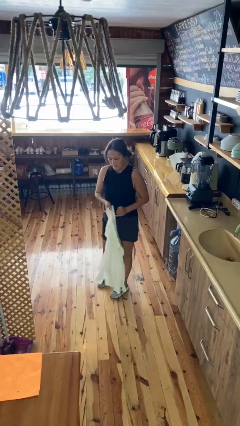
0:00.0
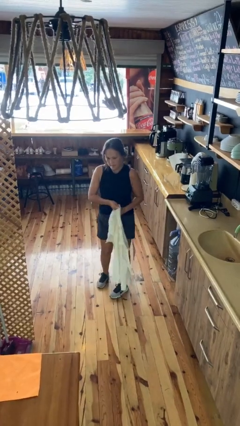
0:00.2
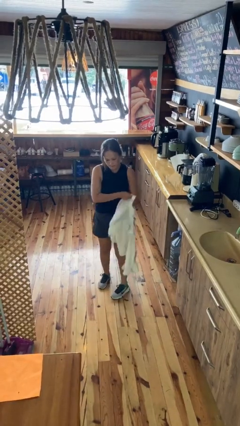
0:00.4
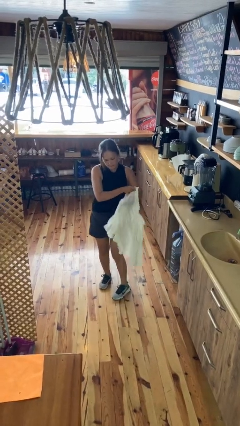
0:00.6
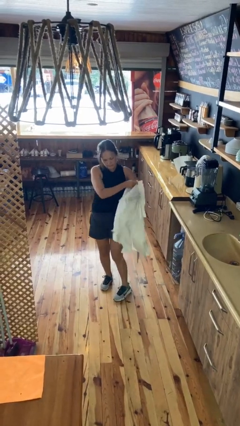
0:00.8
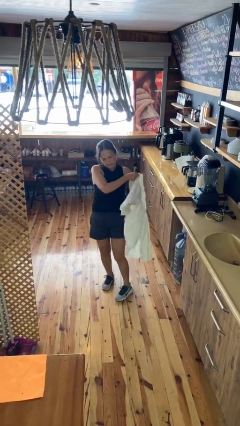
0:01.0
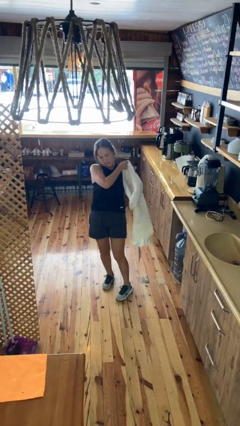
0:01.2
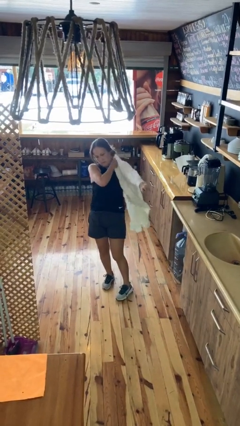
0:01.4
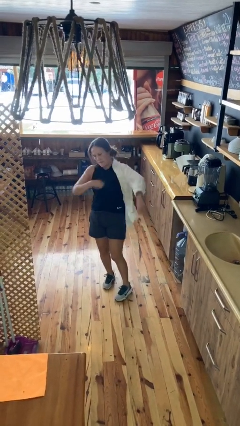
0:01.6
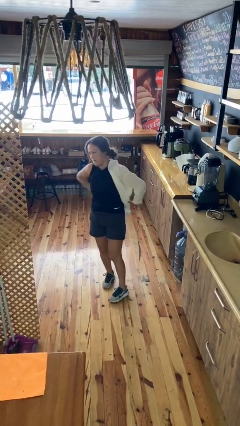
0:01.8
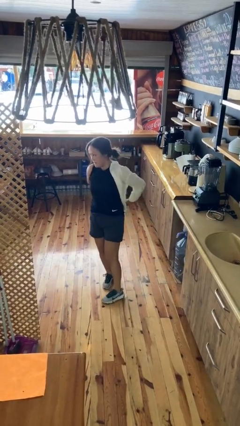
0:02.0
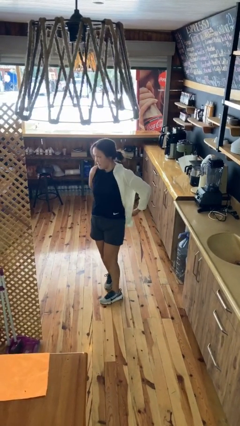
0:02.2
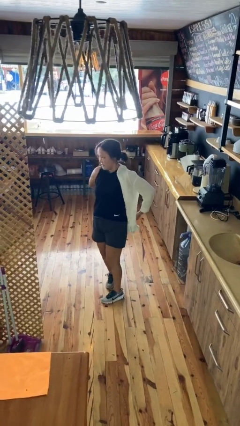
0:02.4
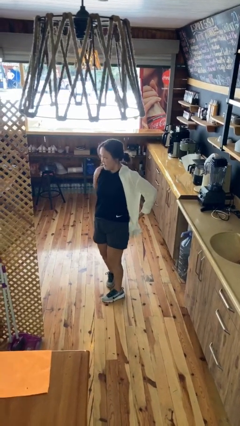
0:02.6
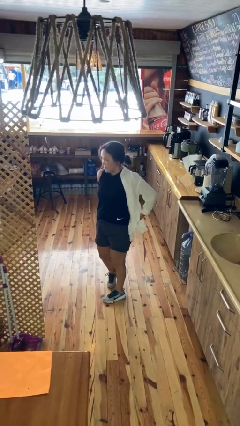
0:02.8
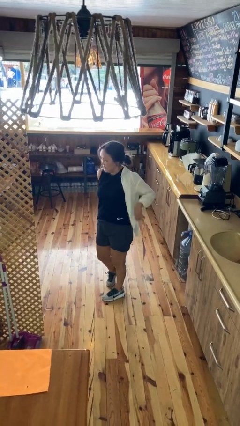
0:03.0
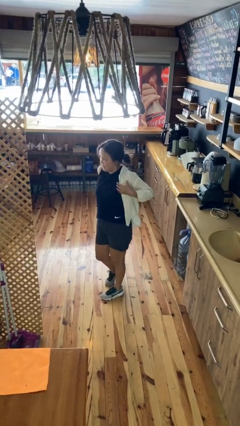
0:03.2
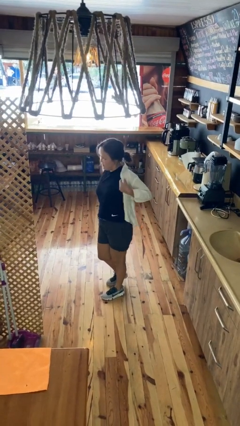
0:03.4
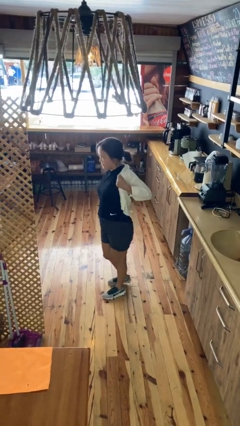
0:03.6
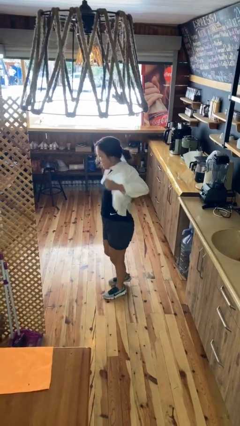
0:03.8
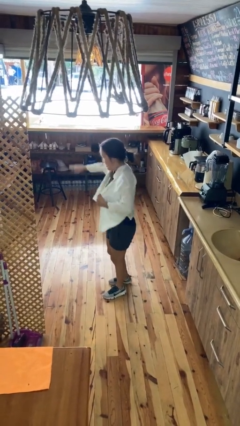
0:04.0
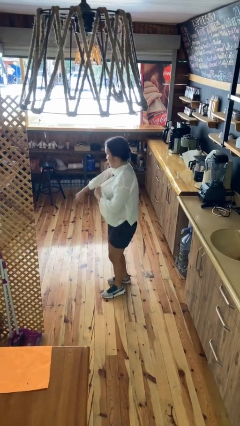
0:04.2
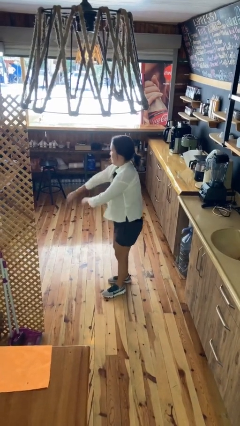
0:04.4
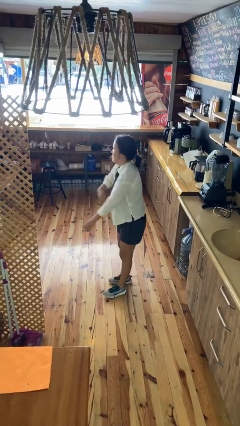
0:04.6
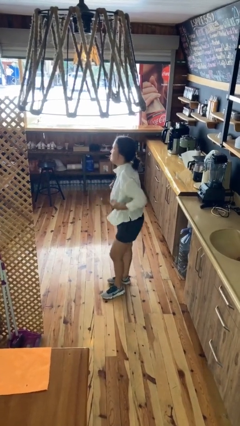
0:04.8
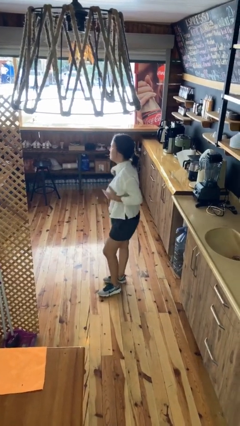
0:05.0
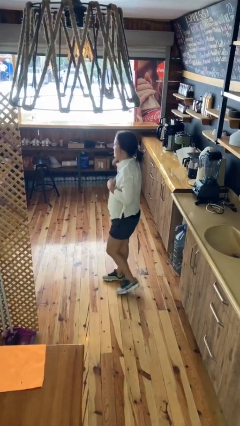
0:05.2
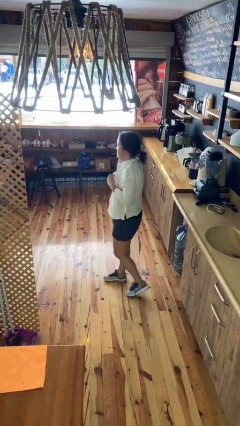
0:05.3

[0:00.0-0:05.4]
person puts on shirt

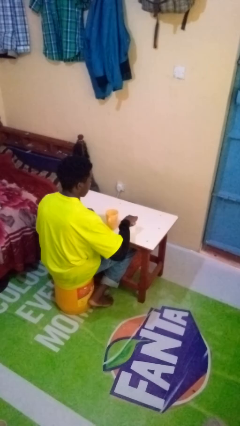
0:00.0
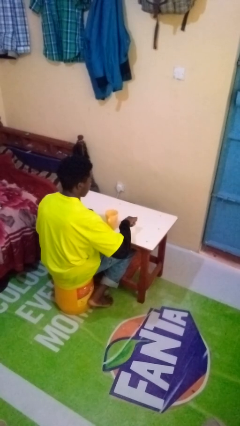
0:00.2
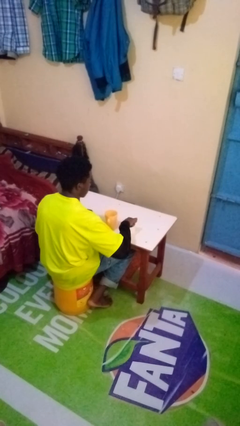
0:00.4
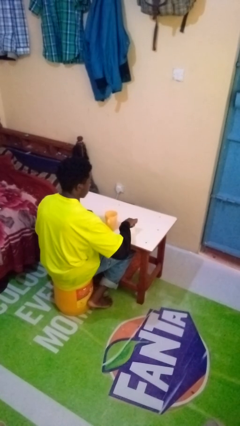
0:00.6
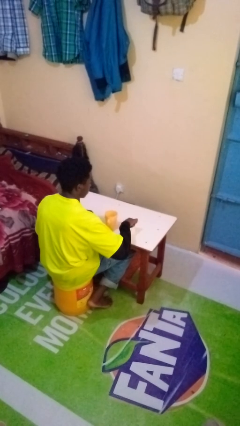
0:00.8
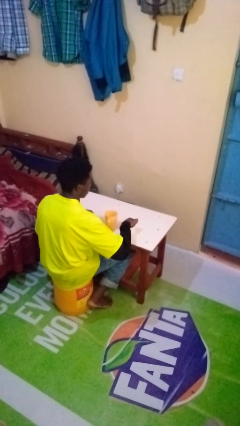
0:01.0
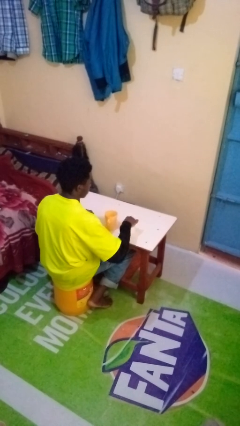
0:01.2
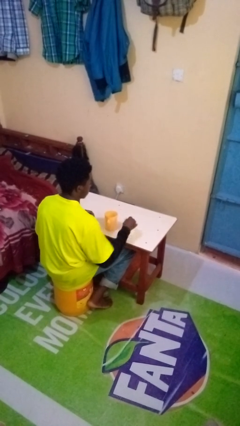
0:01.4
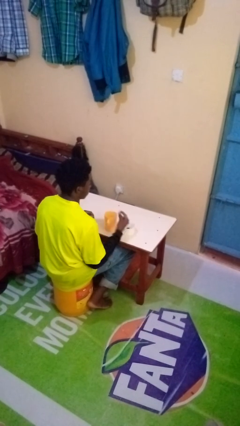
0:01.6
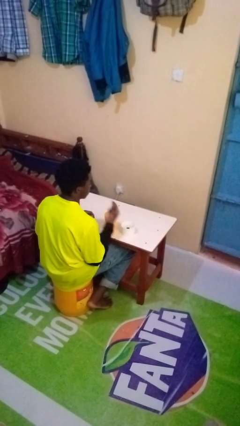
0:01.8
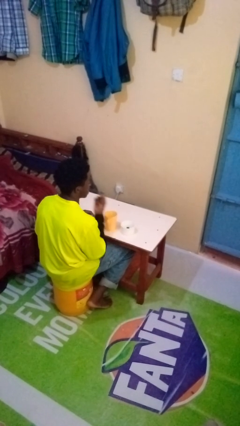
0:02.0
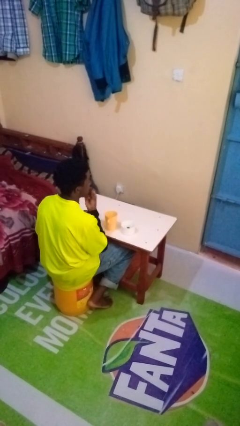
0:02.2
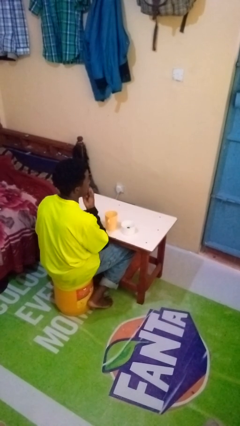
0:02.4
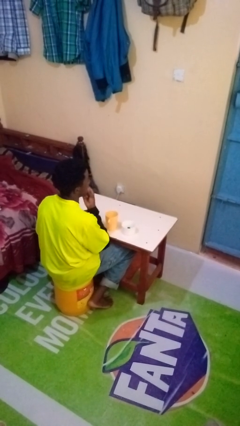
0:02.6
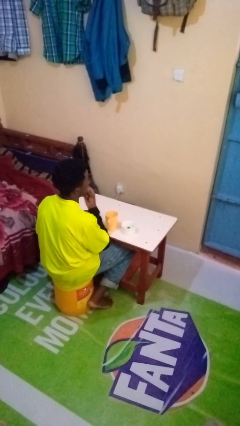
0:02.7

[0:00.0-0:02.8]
person takes medicine pills

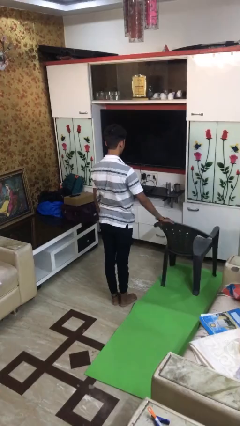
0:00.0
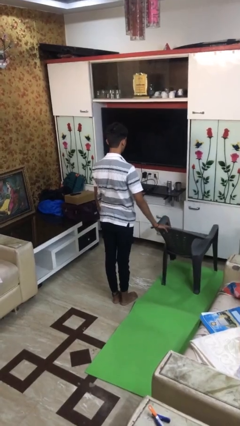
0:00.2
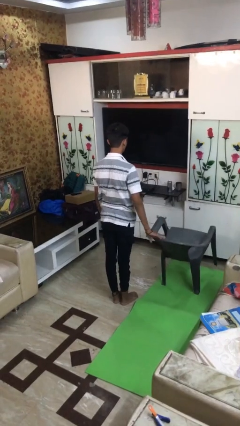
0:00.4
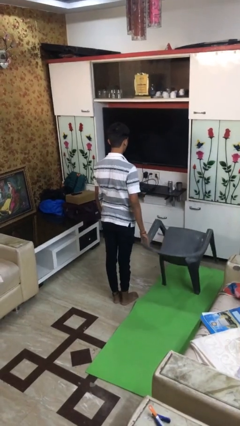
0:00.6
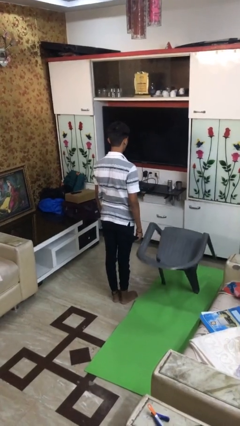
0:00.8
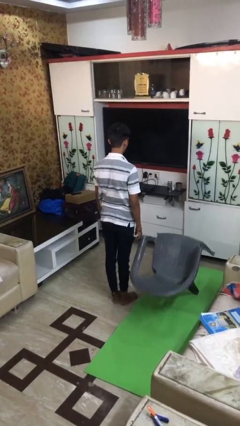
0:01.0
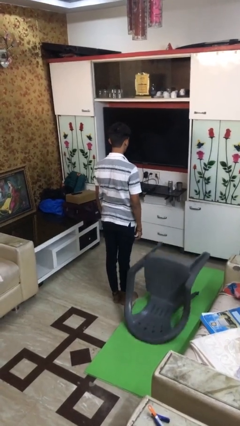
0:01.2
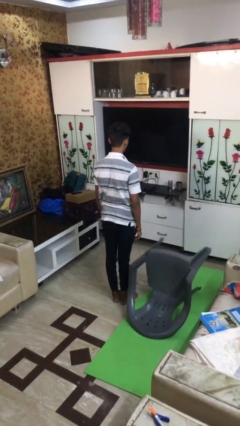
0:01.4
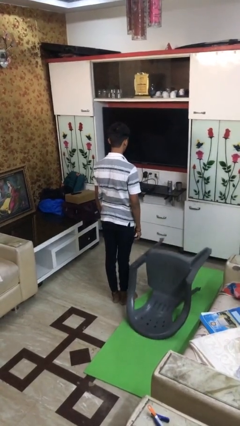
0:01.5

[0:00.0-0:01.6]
person knocks over furniture

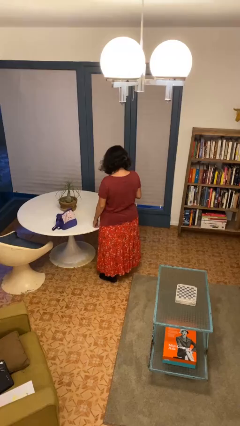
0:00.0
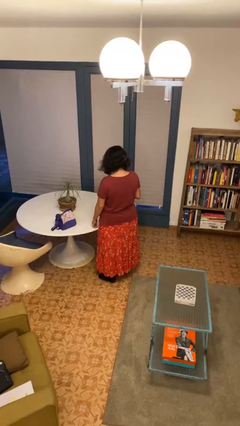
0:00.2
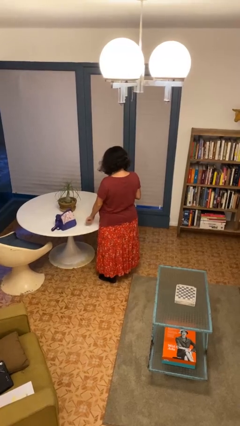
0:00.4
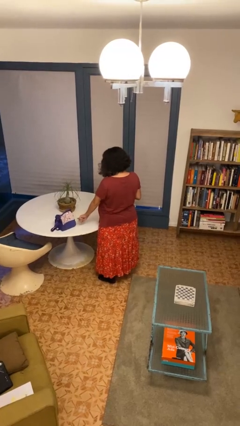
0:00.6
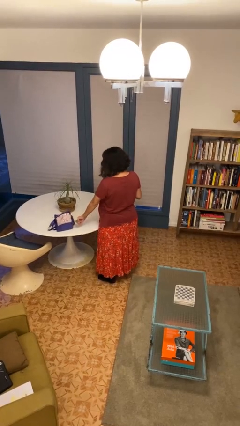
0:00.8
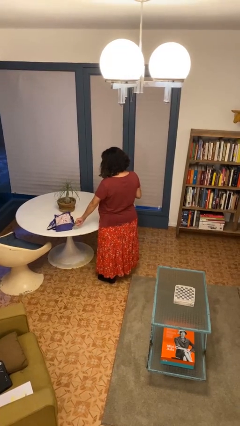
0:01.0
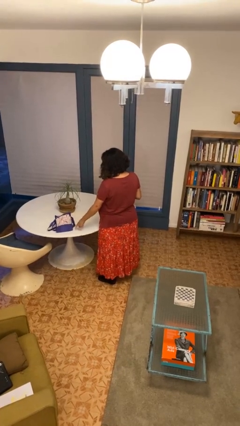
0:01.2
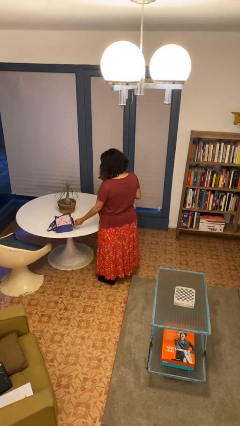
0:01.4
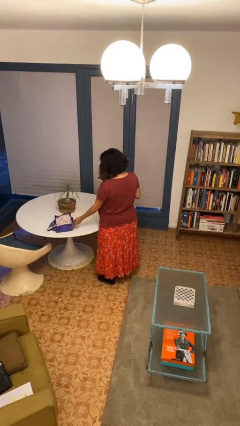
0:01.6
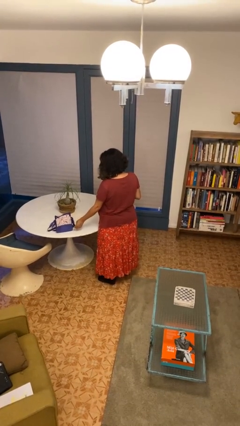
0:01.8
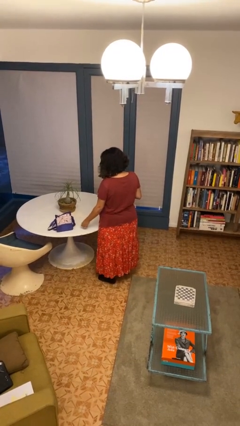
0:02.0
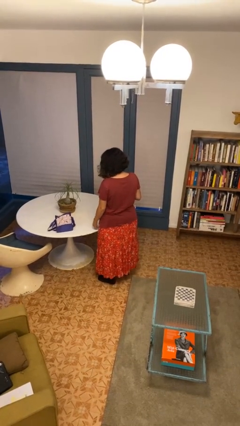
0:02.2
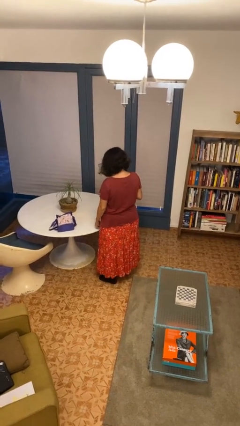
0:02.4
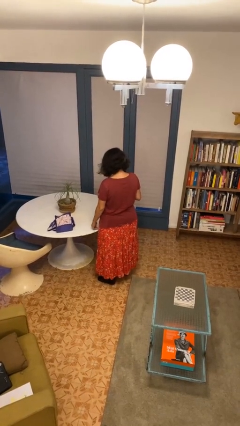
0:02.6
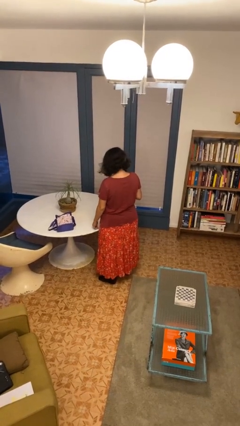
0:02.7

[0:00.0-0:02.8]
person taps object with finger

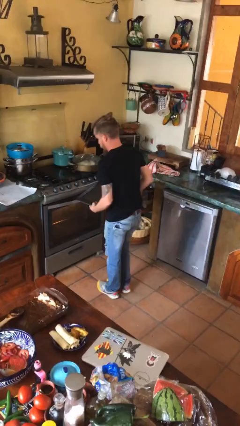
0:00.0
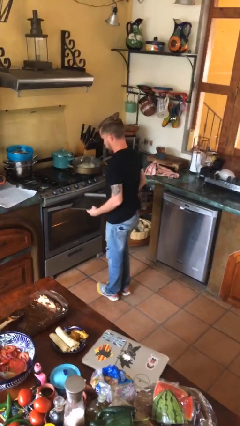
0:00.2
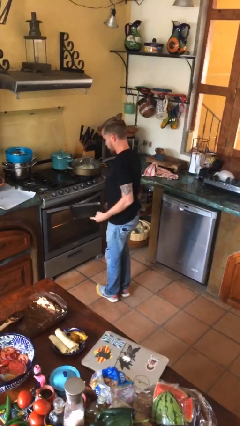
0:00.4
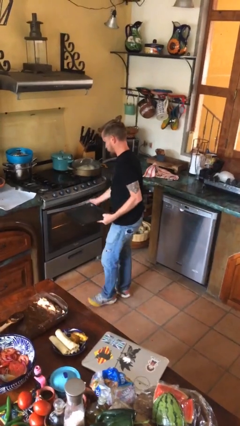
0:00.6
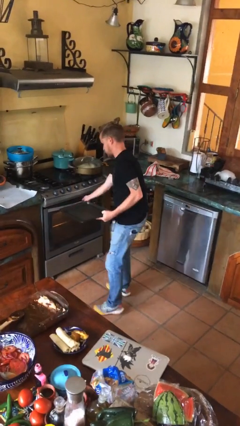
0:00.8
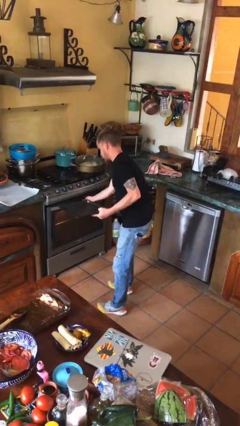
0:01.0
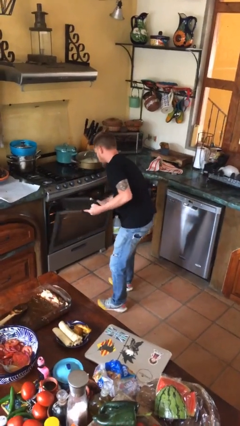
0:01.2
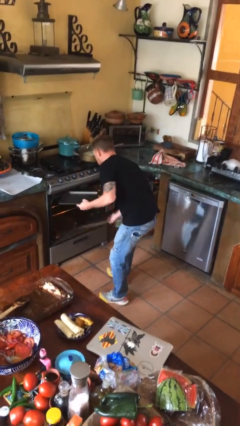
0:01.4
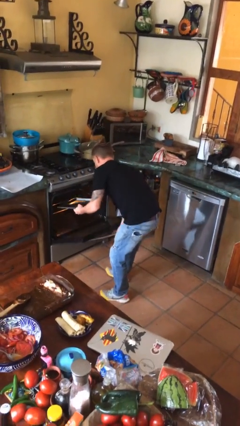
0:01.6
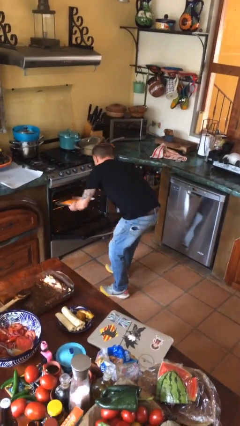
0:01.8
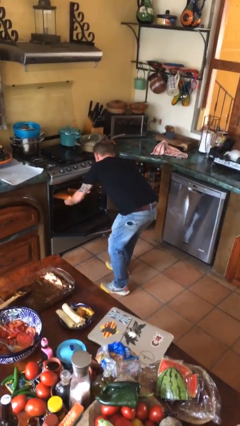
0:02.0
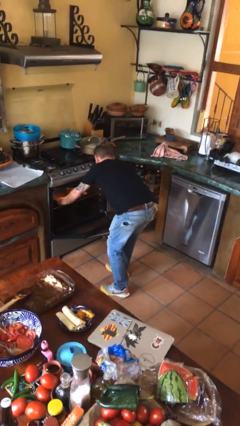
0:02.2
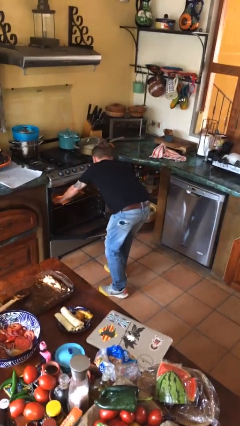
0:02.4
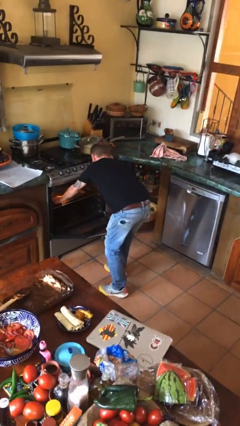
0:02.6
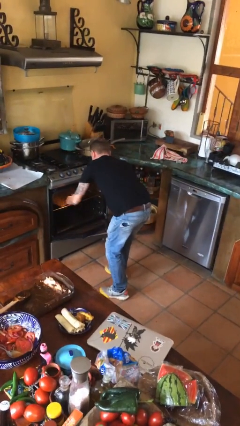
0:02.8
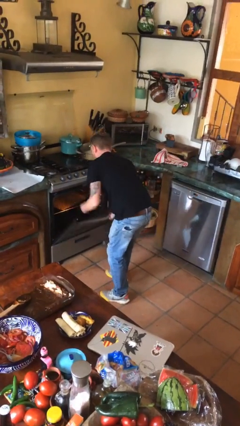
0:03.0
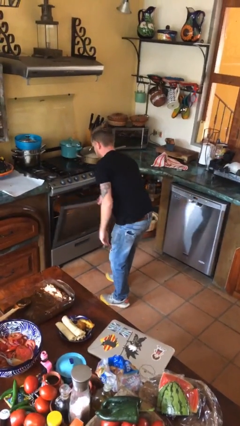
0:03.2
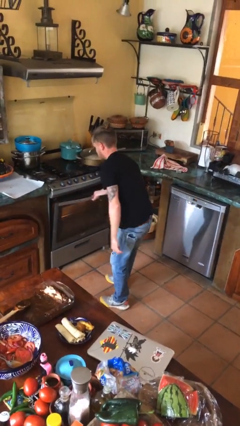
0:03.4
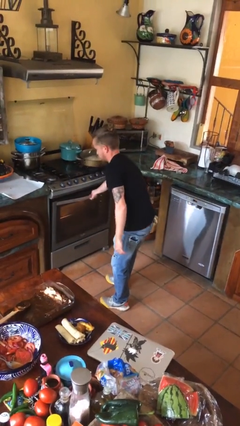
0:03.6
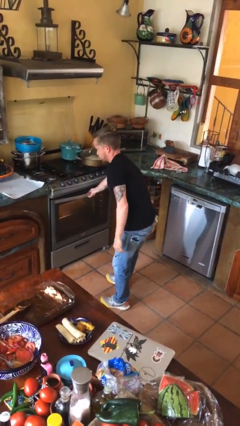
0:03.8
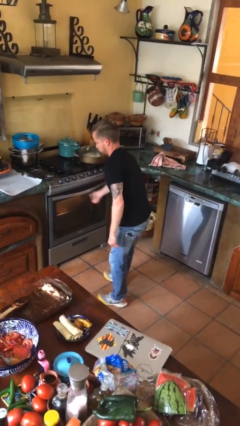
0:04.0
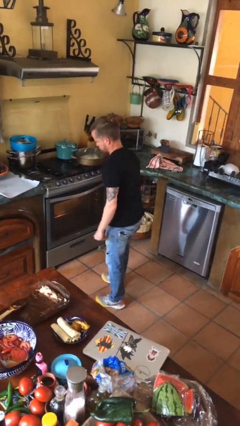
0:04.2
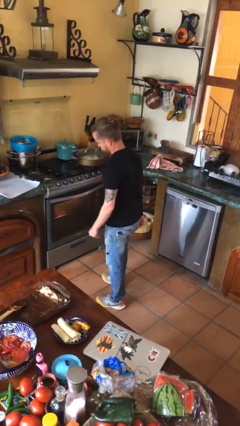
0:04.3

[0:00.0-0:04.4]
person puts object into oven

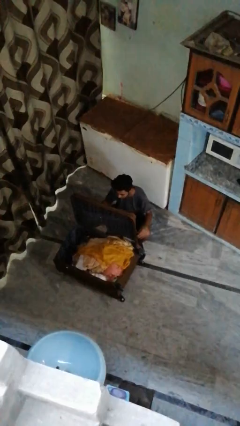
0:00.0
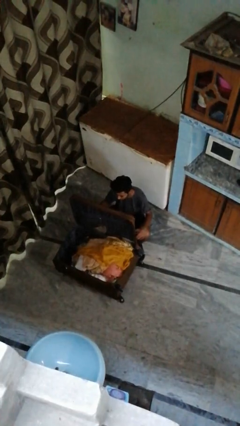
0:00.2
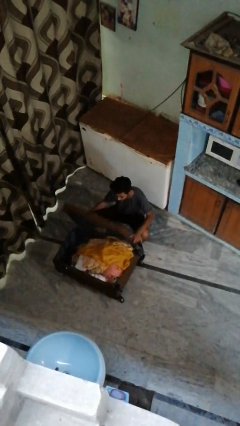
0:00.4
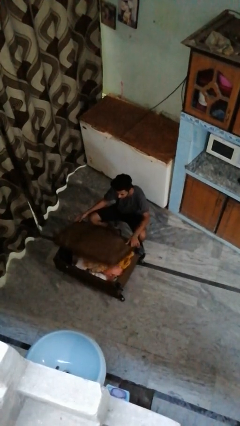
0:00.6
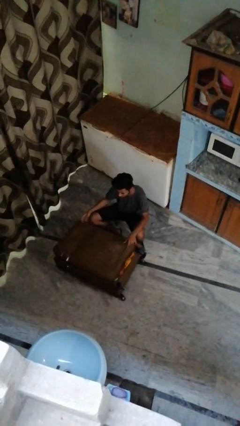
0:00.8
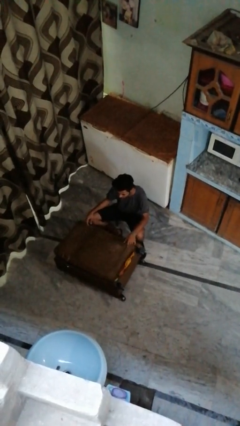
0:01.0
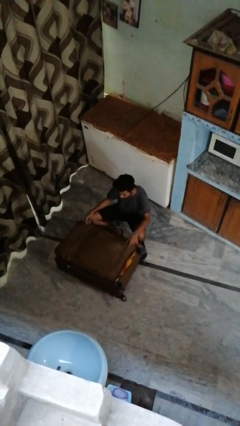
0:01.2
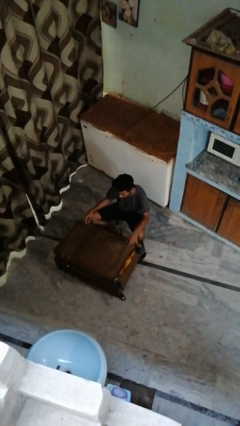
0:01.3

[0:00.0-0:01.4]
person closes suitcase
